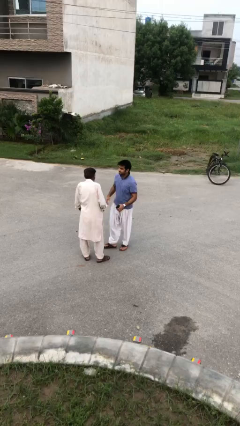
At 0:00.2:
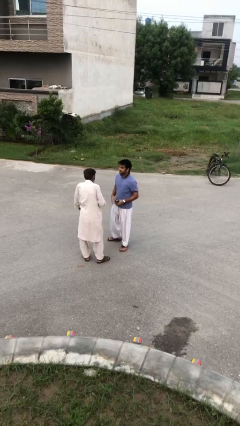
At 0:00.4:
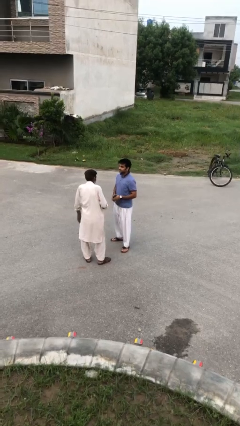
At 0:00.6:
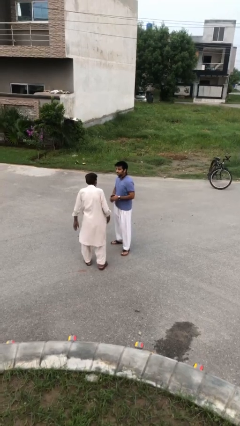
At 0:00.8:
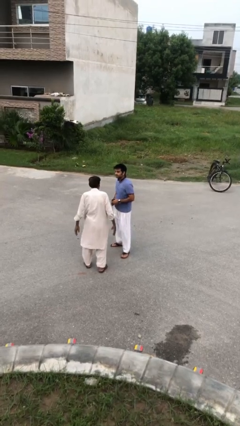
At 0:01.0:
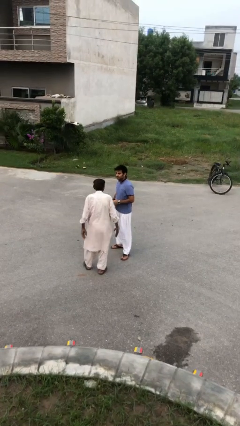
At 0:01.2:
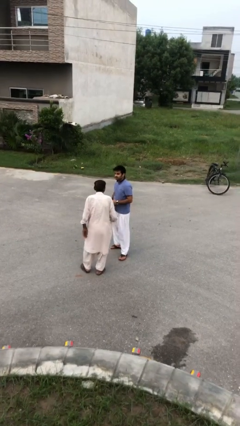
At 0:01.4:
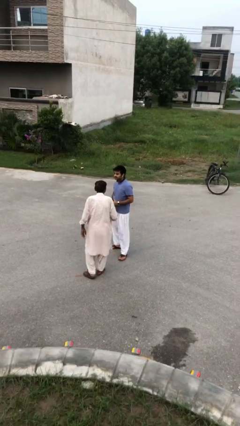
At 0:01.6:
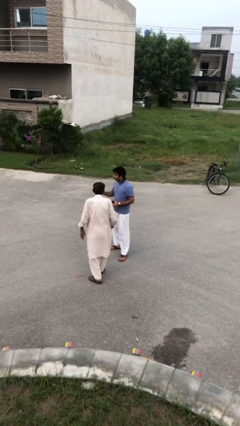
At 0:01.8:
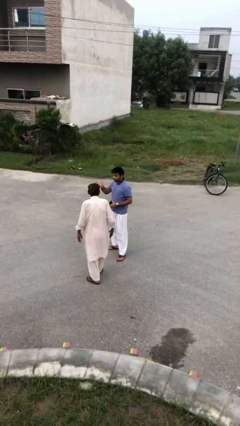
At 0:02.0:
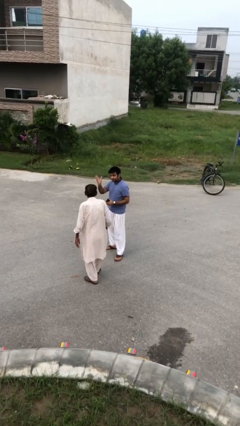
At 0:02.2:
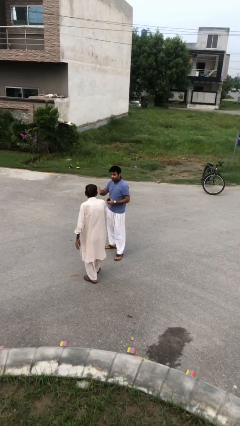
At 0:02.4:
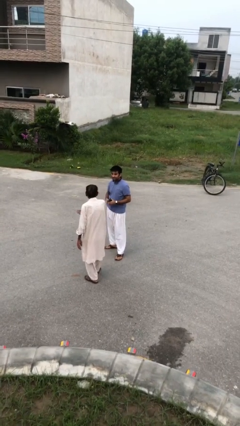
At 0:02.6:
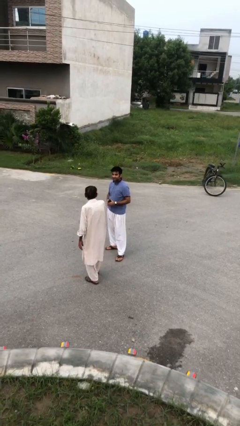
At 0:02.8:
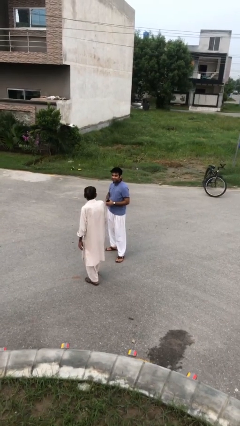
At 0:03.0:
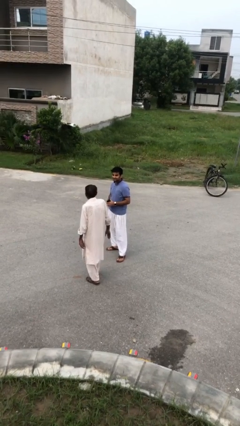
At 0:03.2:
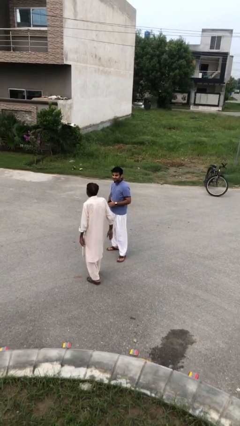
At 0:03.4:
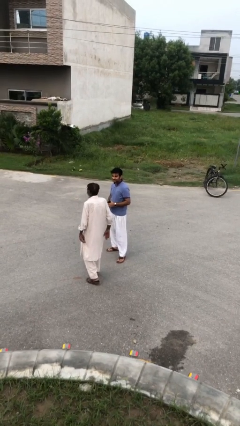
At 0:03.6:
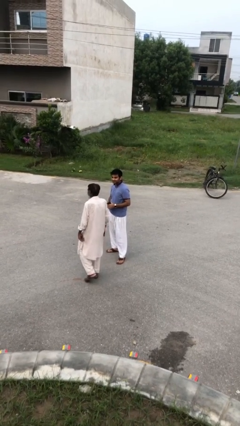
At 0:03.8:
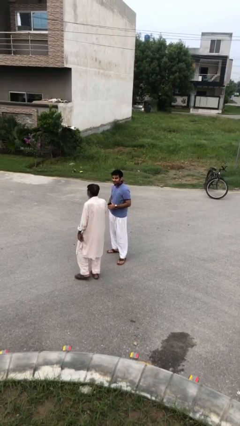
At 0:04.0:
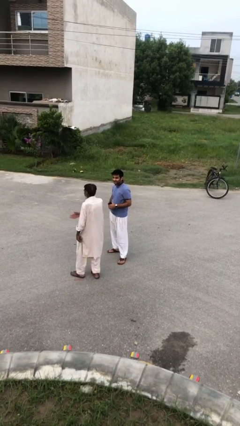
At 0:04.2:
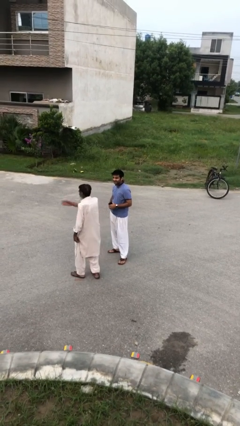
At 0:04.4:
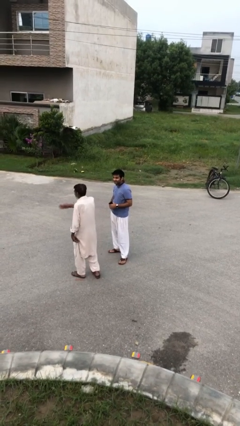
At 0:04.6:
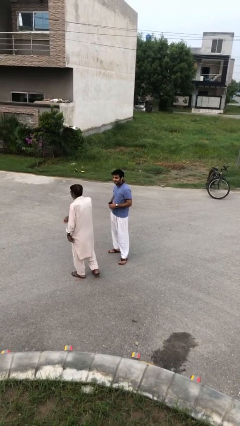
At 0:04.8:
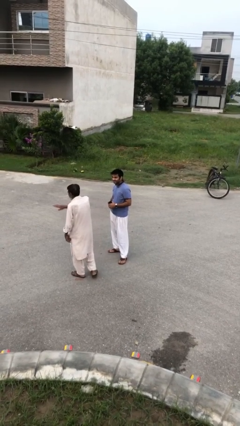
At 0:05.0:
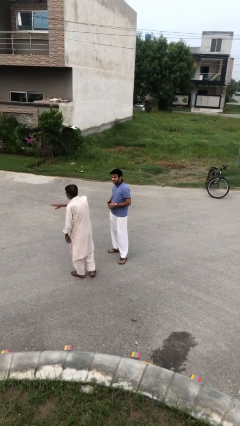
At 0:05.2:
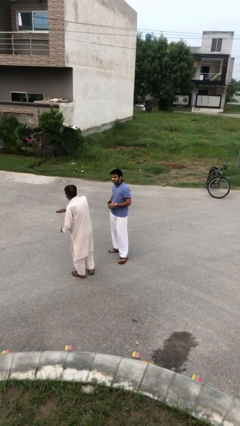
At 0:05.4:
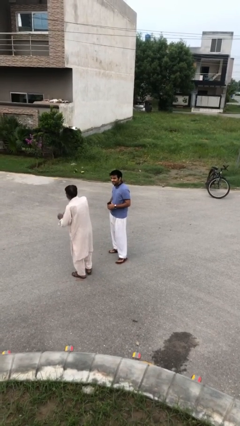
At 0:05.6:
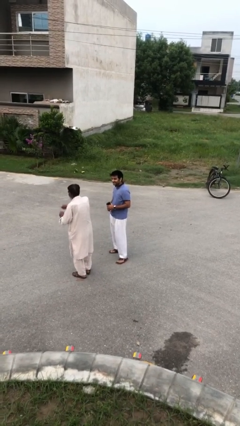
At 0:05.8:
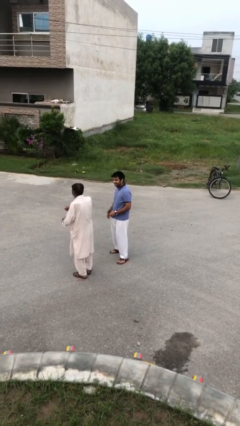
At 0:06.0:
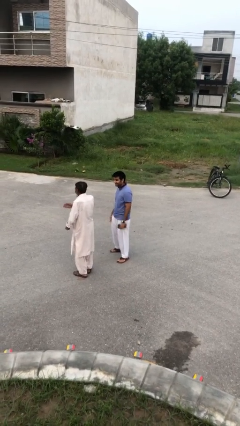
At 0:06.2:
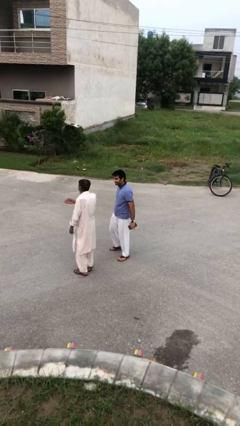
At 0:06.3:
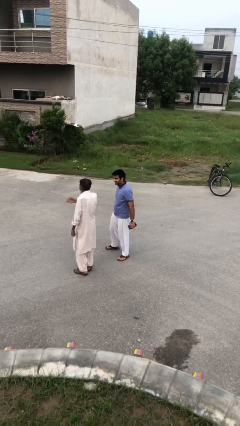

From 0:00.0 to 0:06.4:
person talks to person

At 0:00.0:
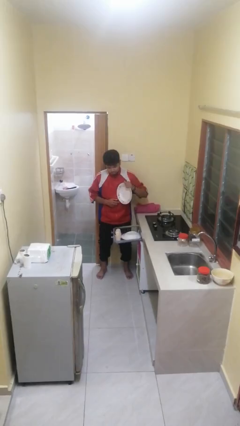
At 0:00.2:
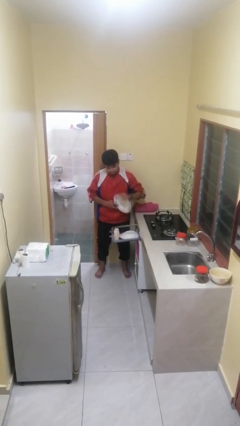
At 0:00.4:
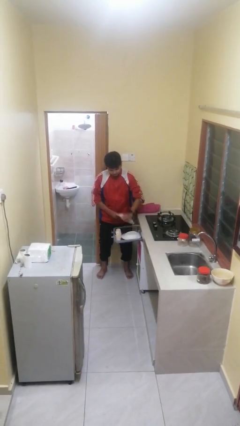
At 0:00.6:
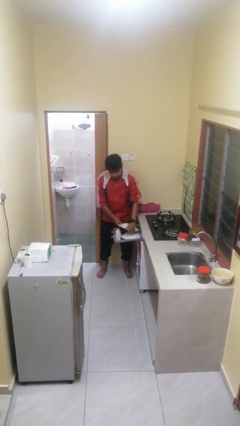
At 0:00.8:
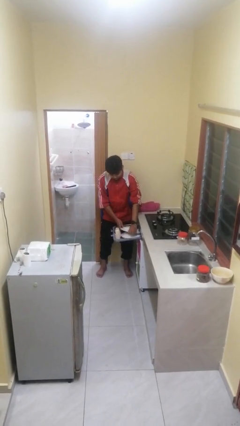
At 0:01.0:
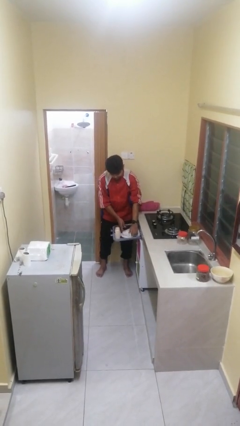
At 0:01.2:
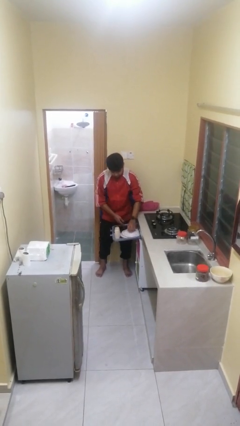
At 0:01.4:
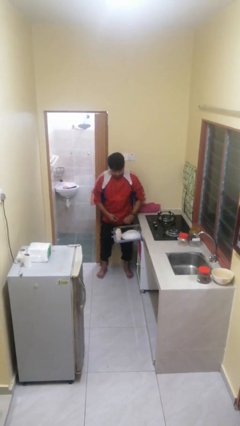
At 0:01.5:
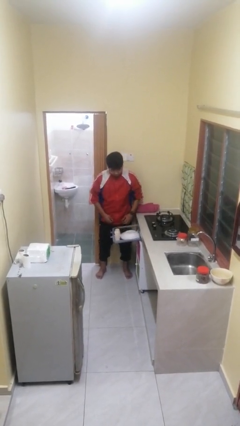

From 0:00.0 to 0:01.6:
person puts object into kitchen drawer

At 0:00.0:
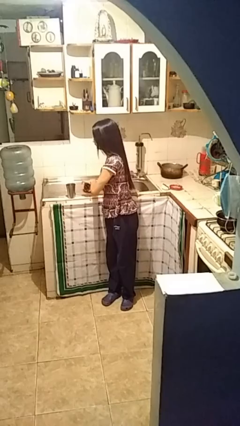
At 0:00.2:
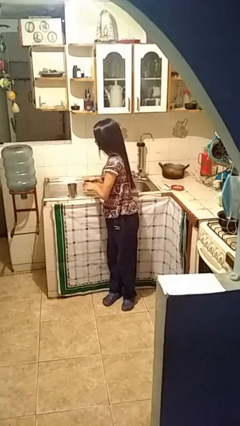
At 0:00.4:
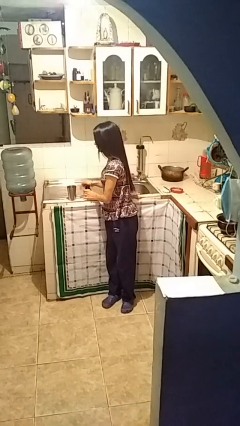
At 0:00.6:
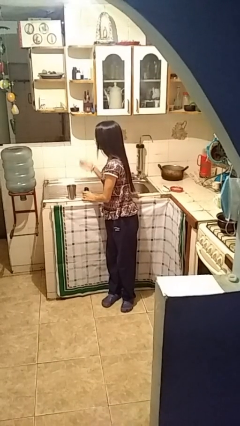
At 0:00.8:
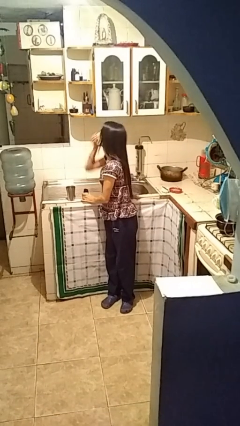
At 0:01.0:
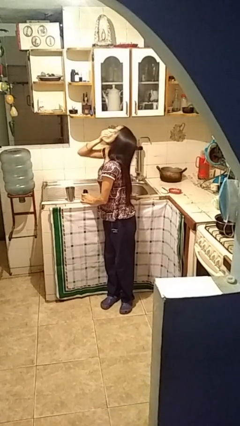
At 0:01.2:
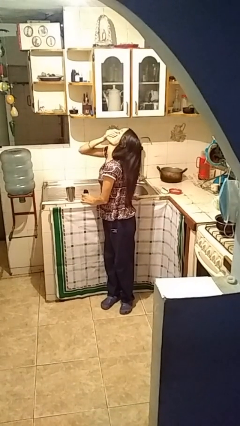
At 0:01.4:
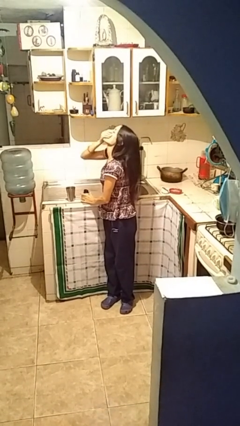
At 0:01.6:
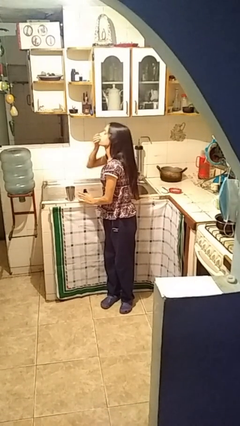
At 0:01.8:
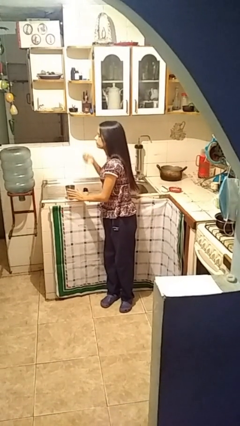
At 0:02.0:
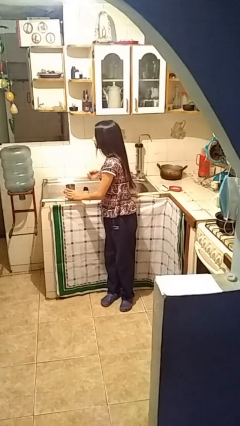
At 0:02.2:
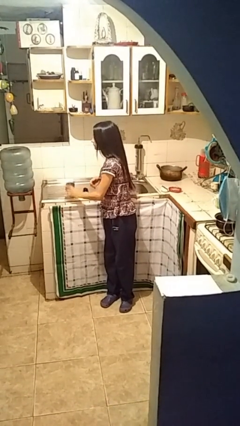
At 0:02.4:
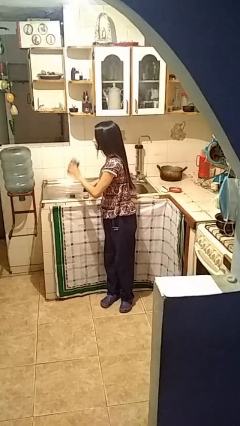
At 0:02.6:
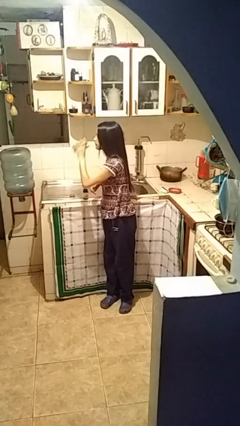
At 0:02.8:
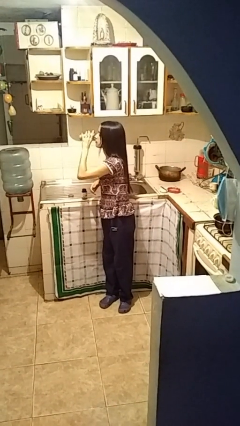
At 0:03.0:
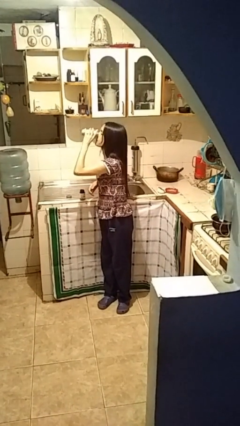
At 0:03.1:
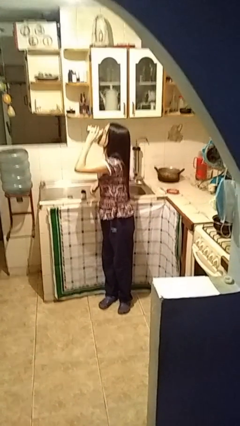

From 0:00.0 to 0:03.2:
person takes medicine pills

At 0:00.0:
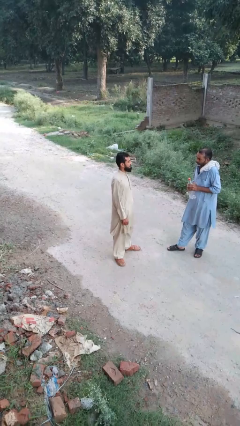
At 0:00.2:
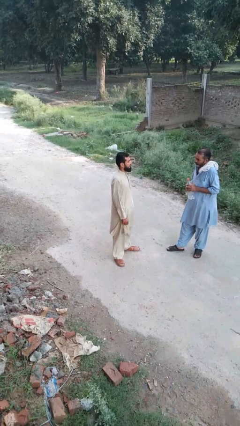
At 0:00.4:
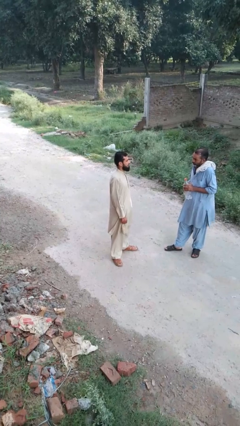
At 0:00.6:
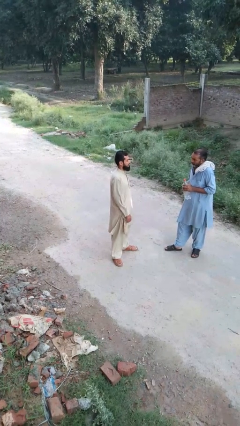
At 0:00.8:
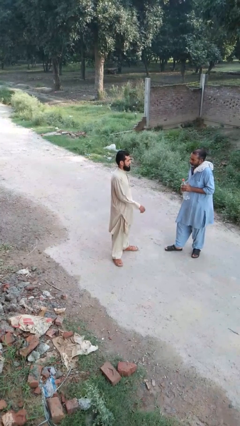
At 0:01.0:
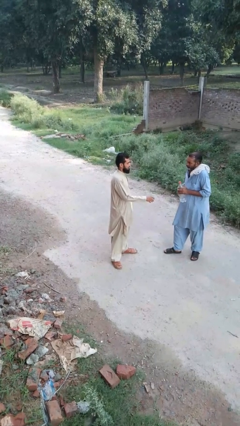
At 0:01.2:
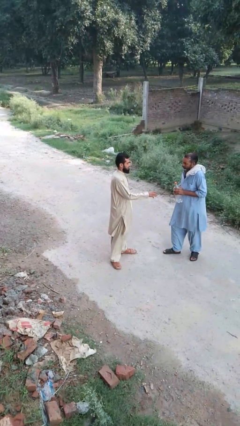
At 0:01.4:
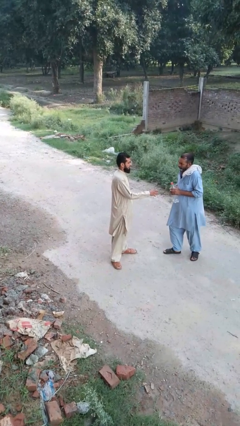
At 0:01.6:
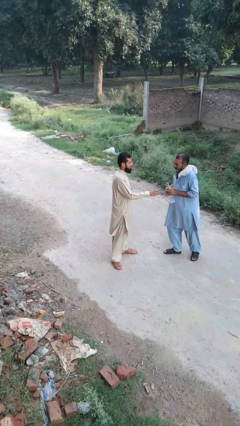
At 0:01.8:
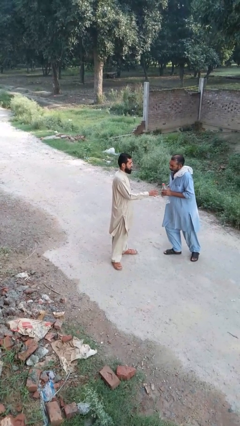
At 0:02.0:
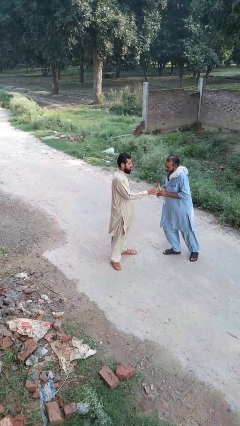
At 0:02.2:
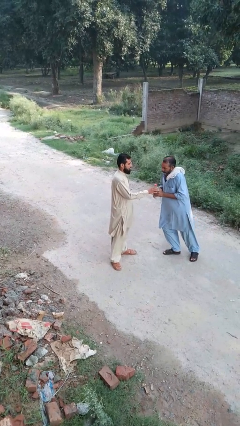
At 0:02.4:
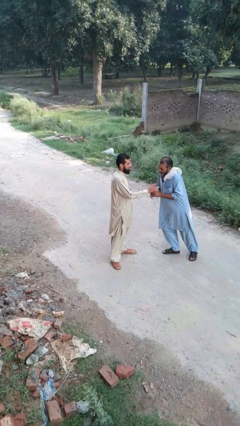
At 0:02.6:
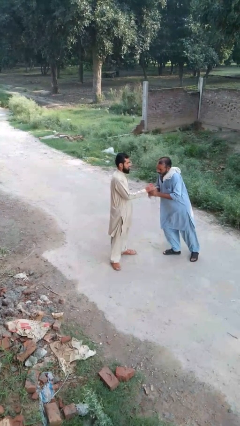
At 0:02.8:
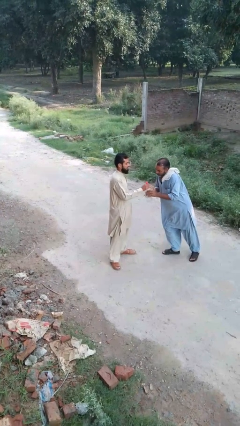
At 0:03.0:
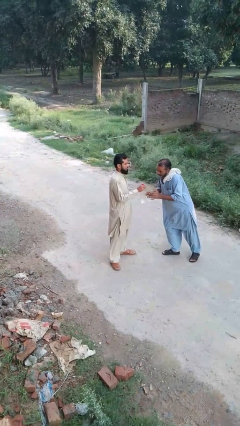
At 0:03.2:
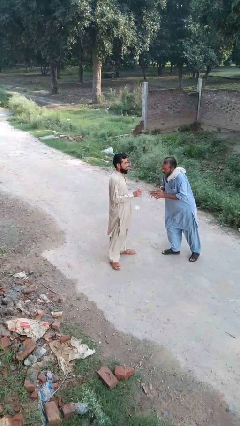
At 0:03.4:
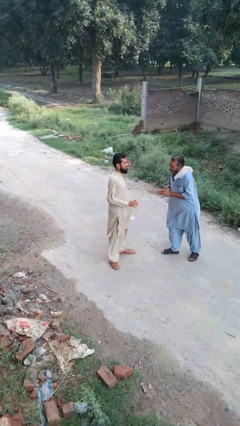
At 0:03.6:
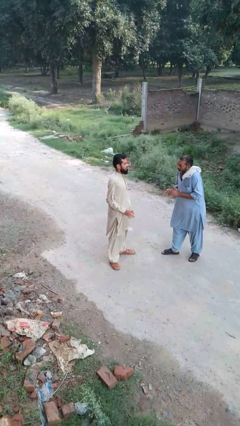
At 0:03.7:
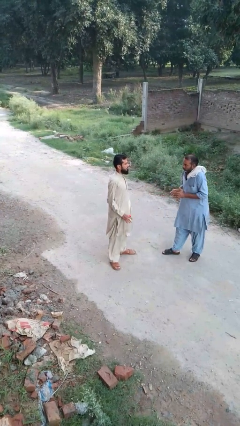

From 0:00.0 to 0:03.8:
person transfers object to person

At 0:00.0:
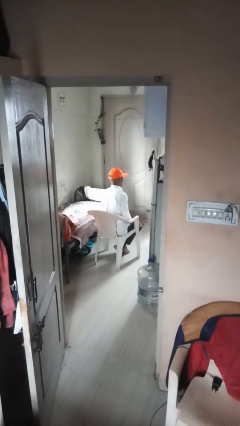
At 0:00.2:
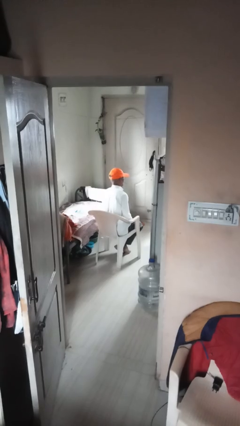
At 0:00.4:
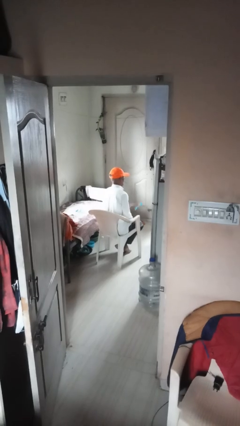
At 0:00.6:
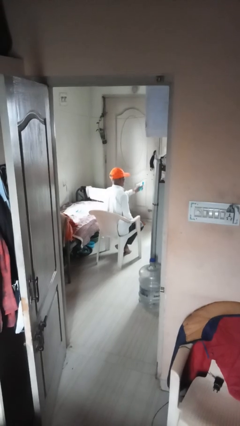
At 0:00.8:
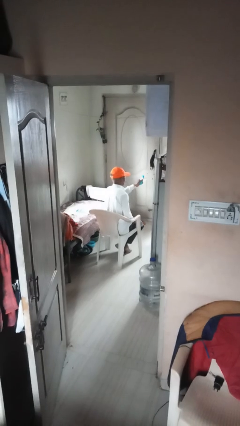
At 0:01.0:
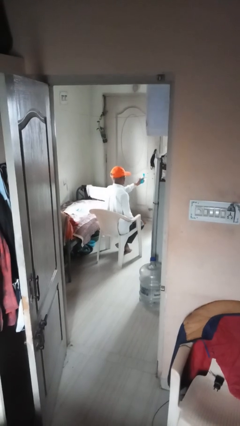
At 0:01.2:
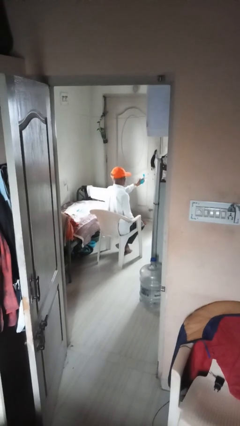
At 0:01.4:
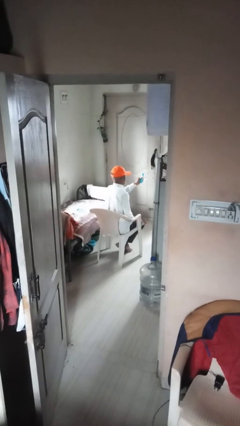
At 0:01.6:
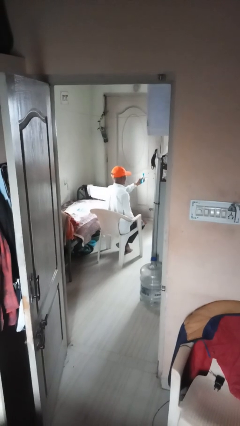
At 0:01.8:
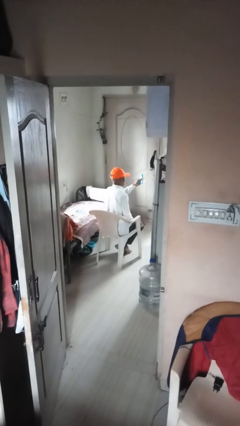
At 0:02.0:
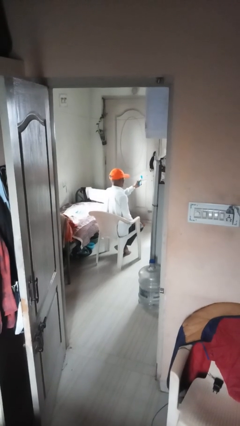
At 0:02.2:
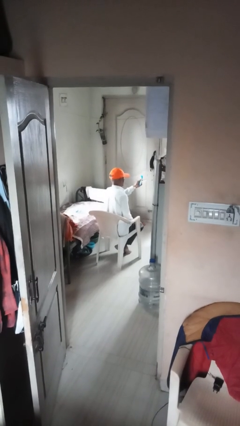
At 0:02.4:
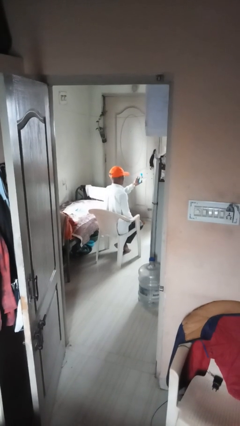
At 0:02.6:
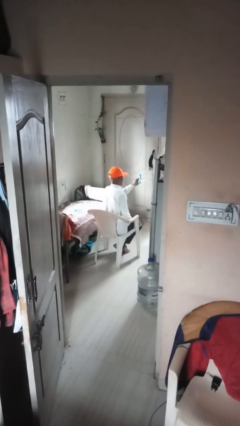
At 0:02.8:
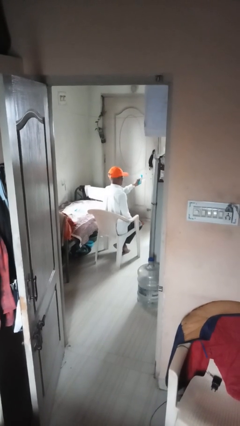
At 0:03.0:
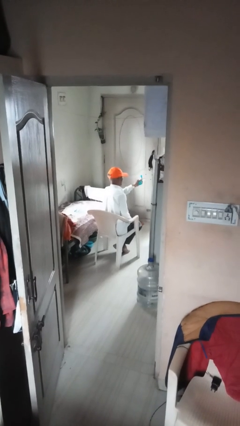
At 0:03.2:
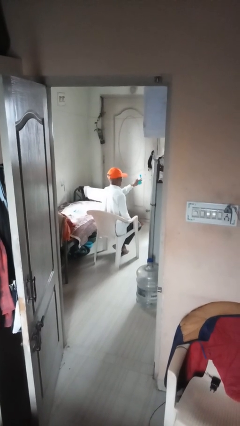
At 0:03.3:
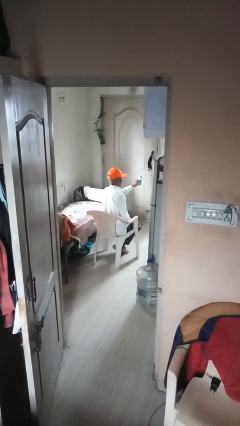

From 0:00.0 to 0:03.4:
person squeezes object
